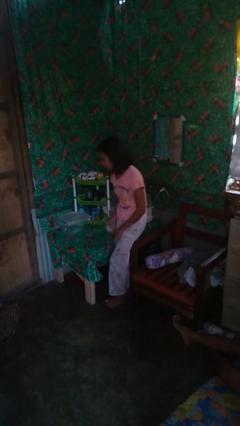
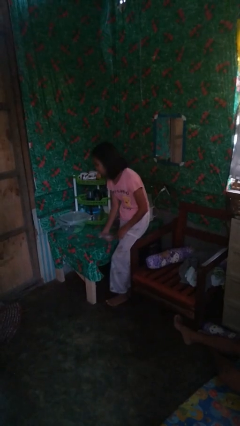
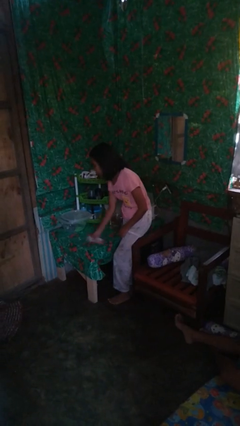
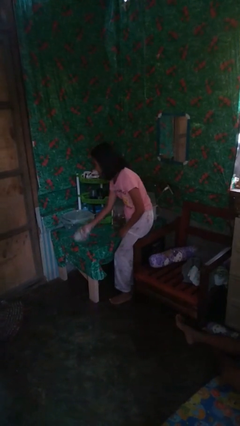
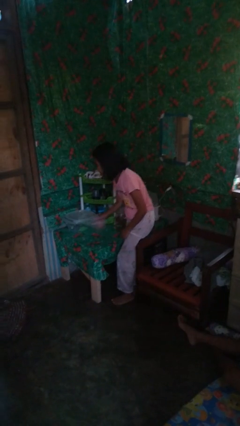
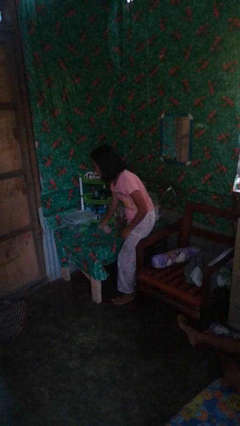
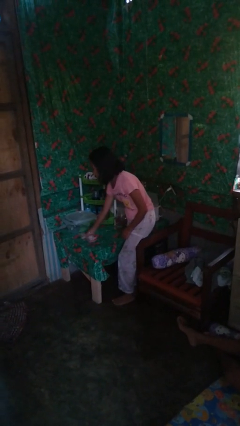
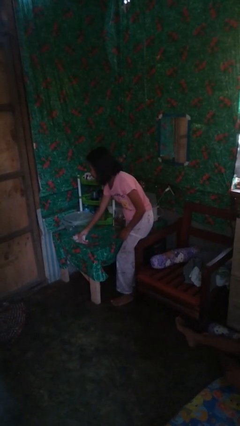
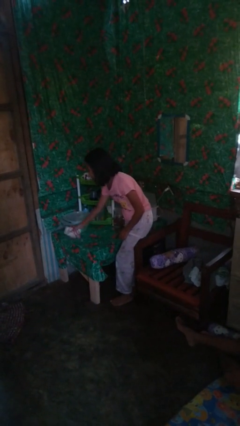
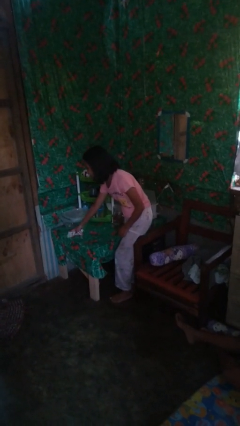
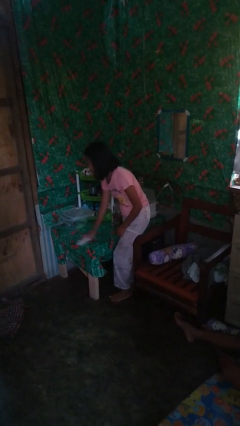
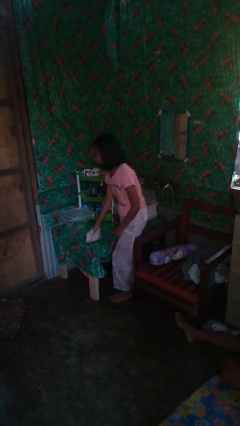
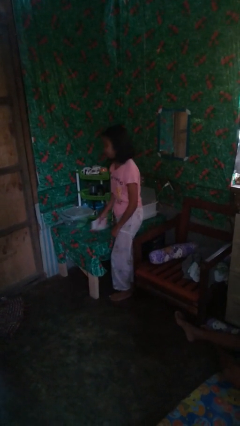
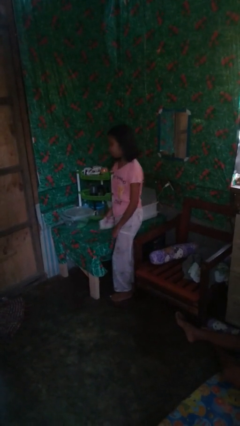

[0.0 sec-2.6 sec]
person cleans table with rag

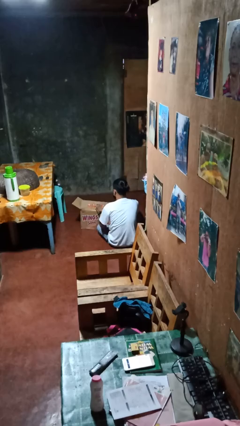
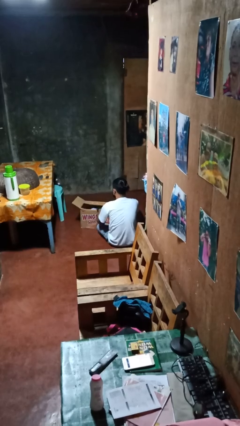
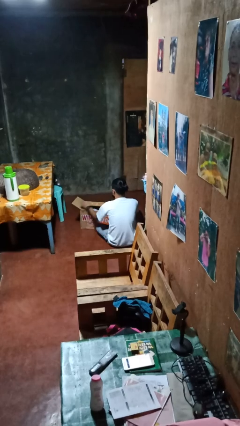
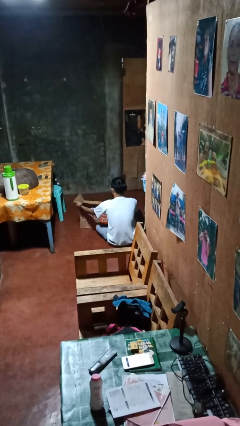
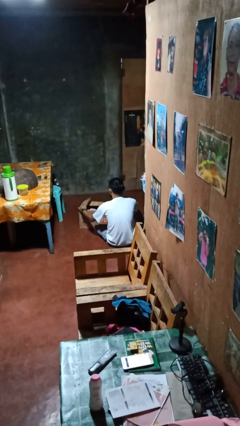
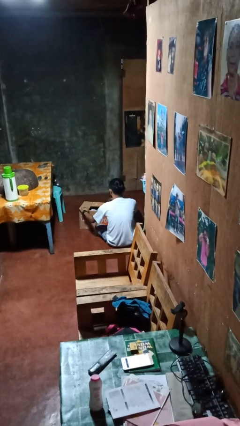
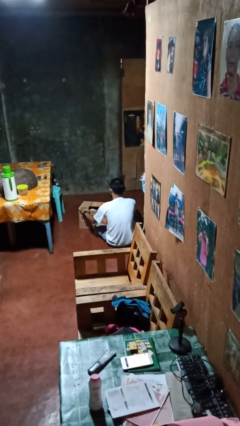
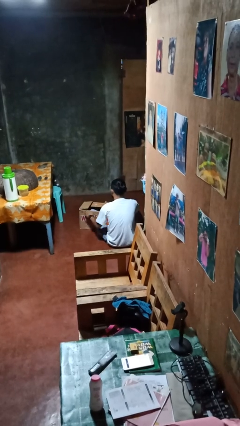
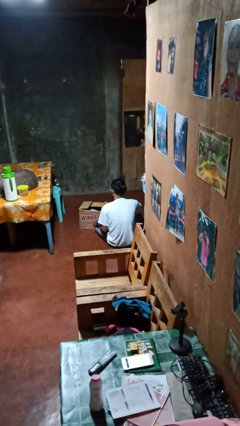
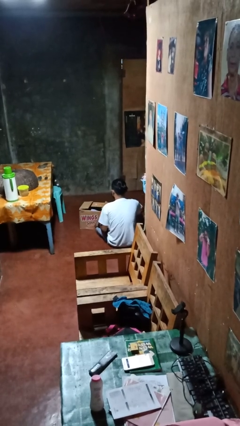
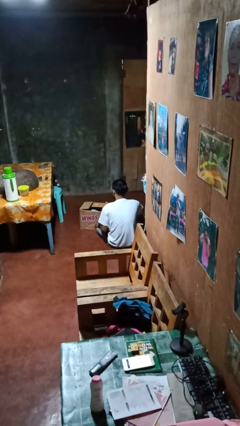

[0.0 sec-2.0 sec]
person closes box

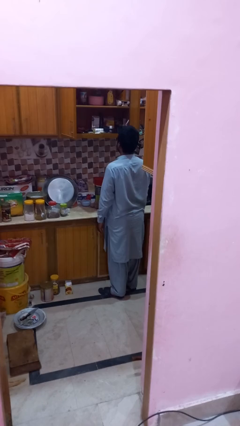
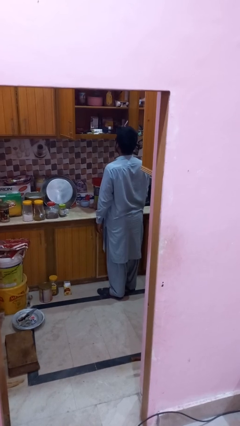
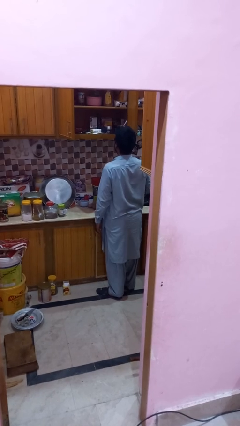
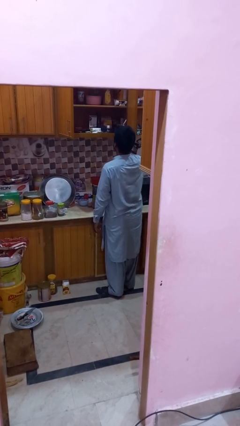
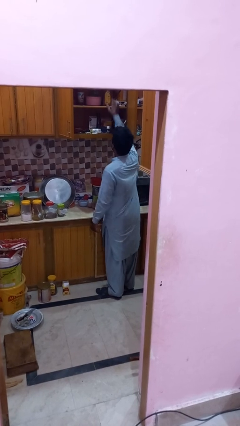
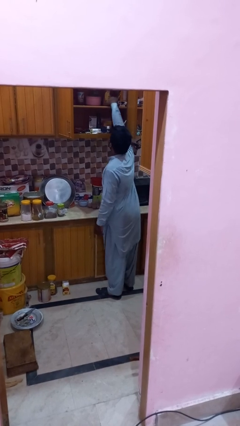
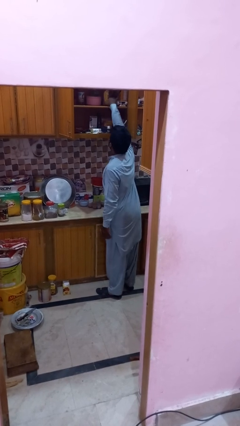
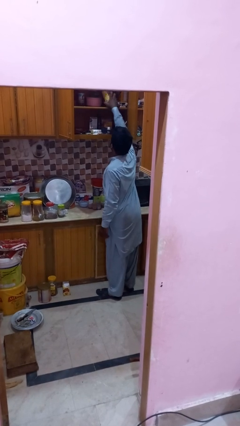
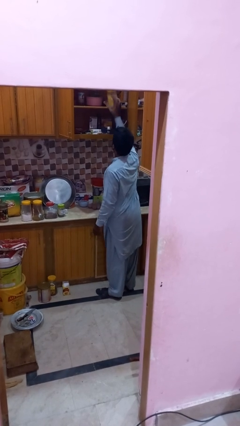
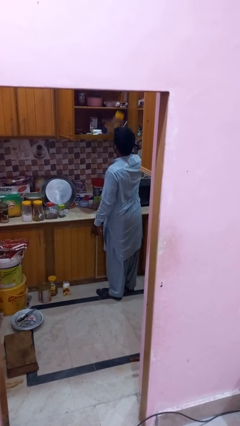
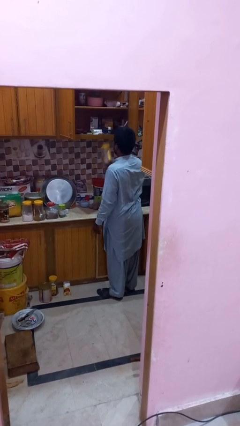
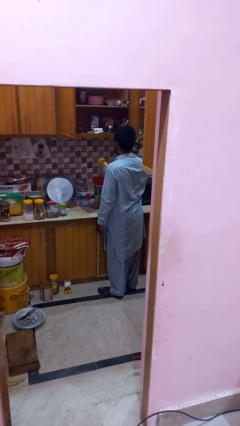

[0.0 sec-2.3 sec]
person takes object from cabinet

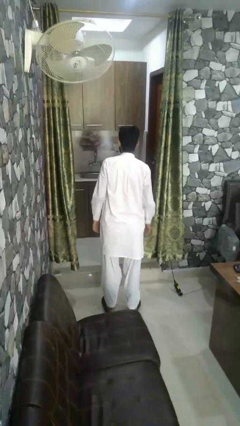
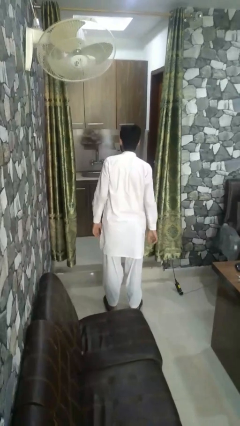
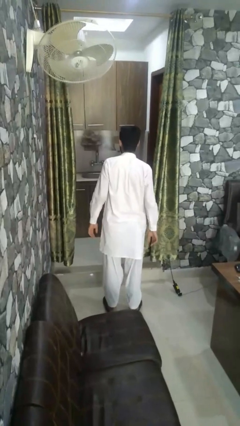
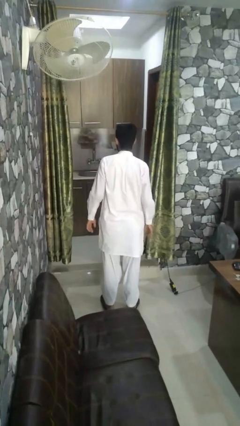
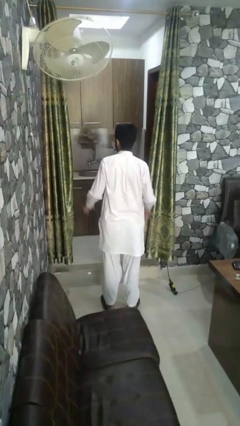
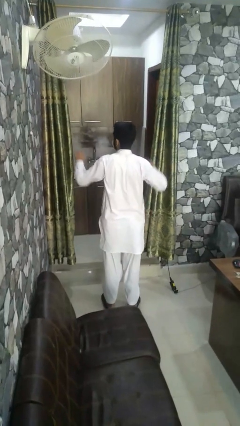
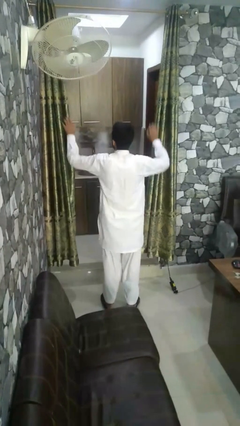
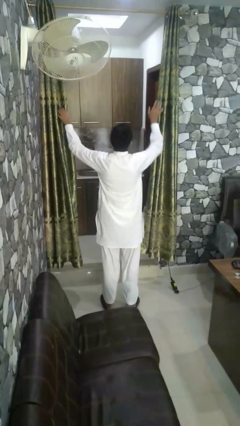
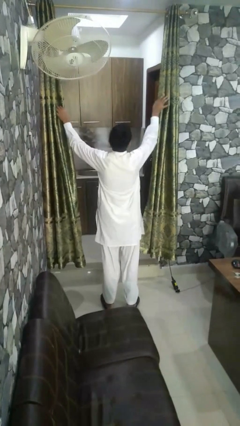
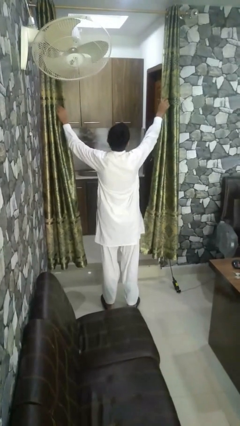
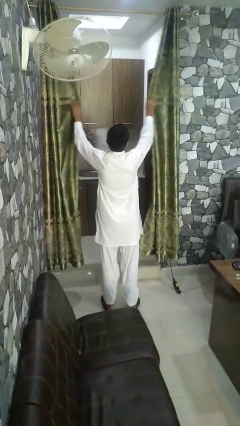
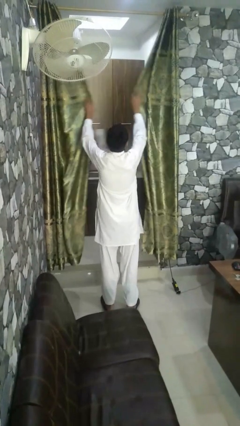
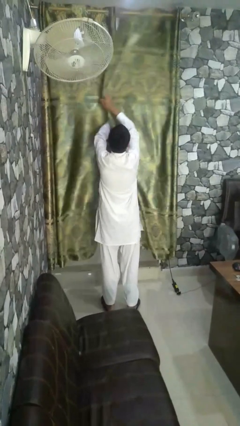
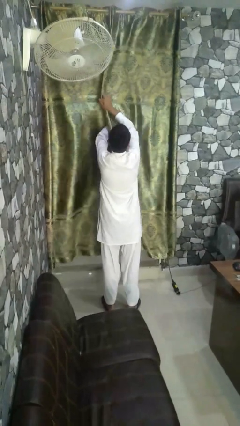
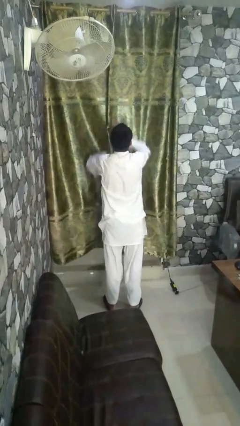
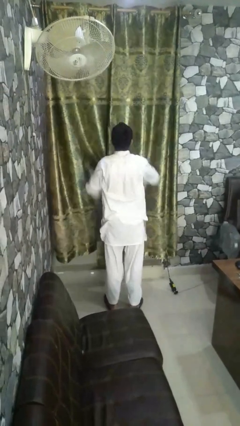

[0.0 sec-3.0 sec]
person closes curtains

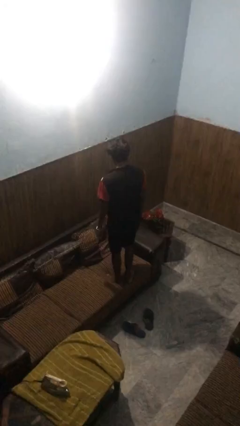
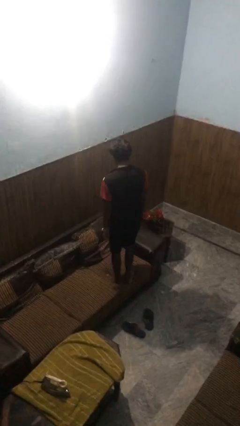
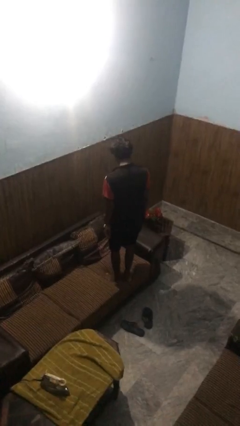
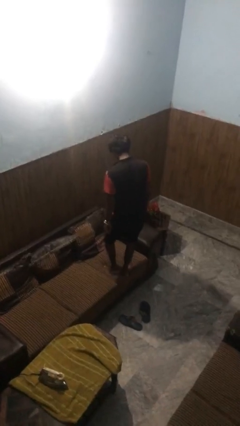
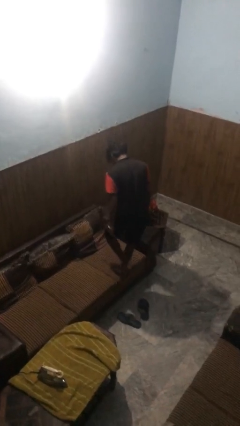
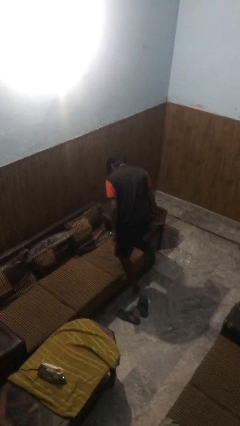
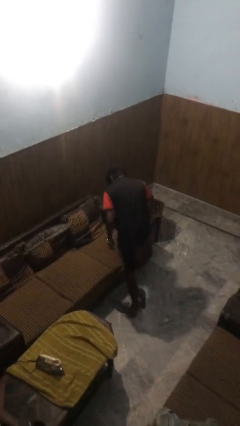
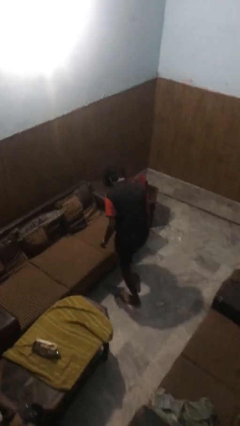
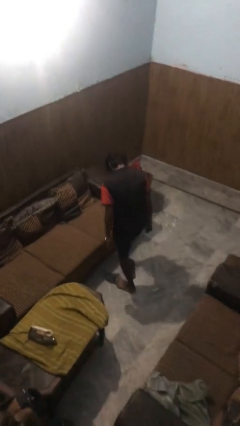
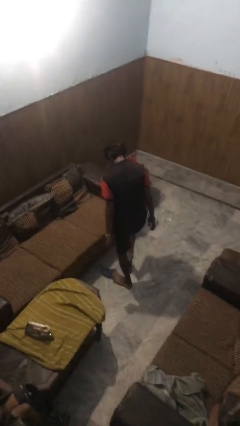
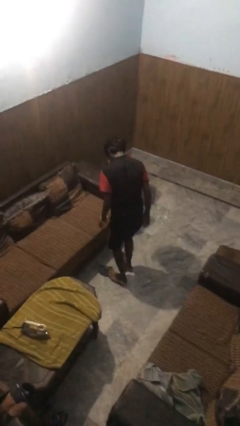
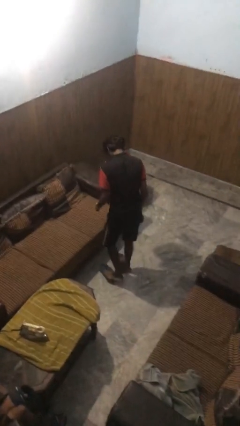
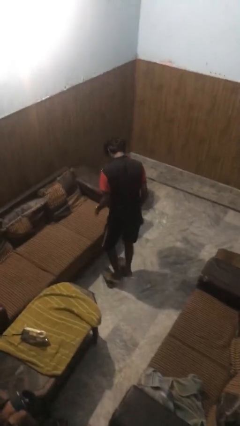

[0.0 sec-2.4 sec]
person climbs off couch

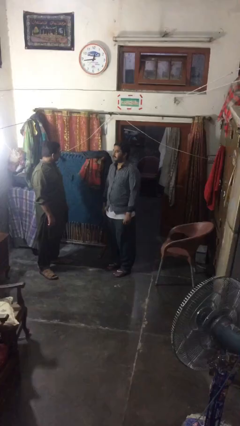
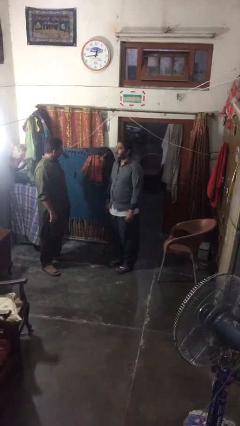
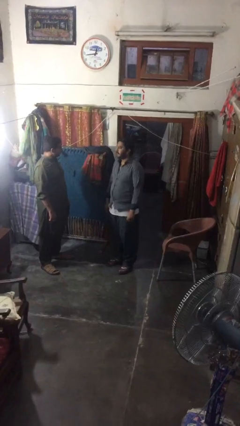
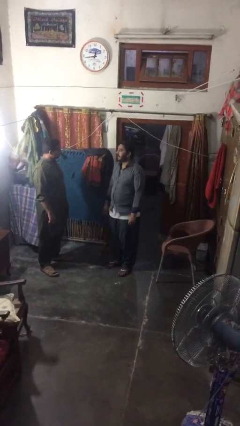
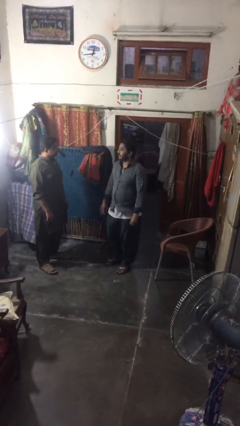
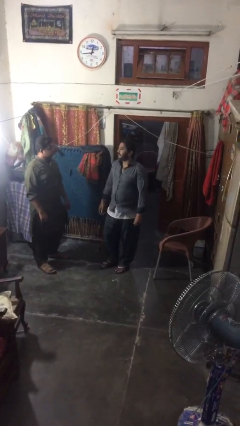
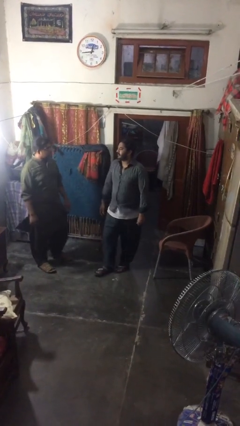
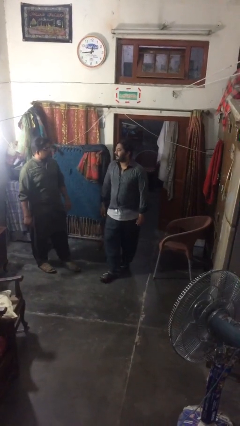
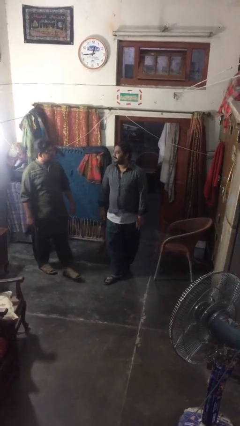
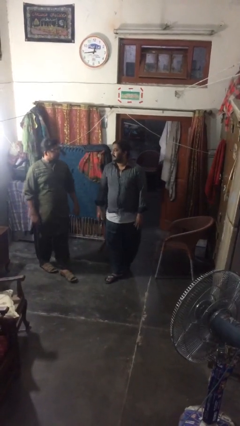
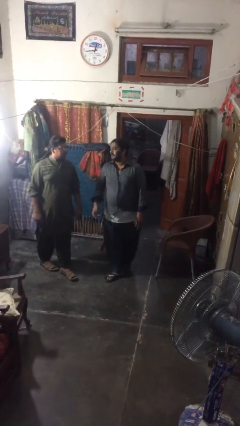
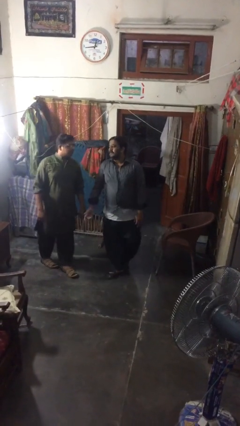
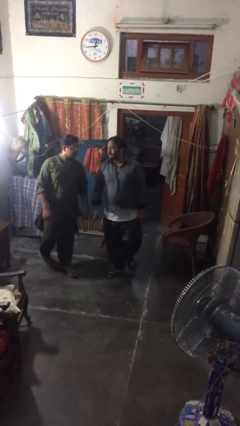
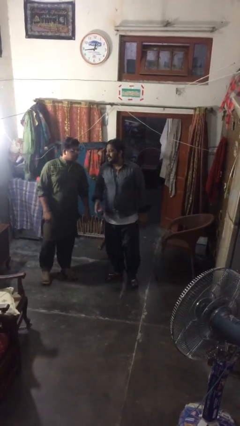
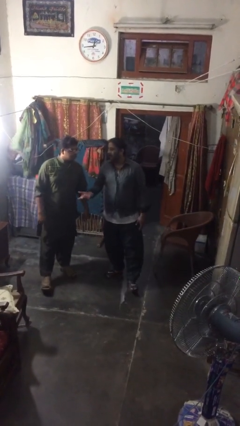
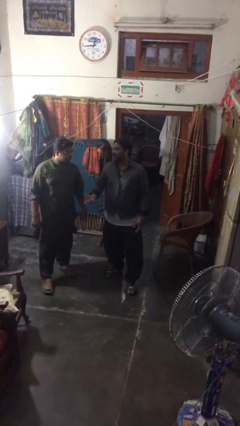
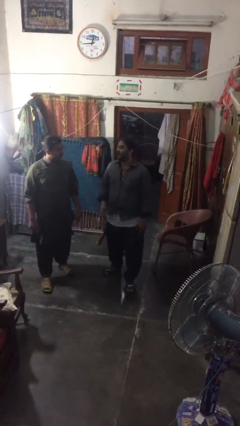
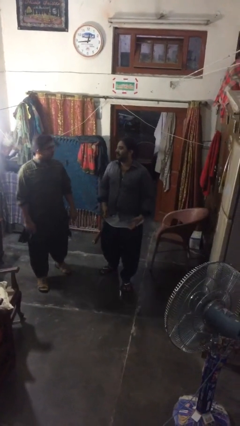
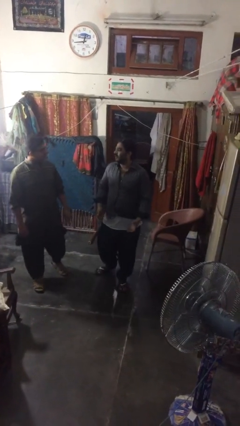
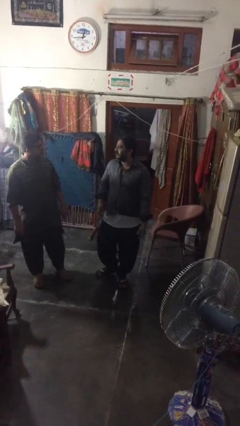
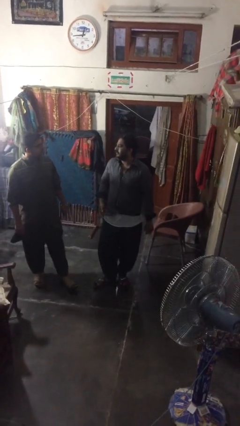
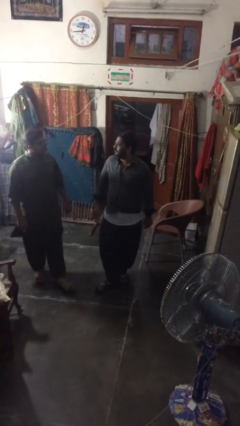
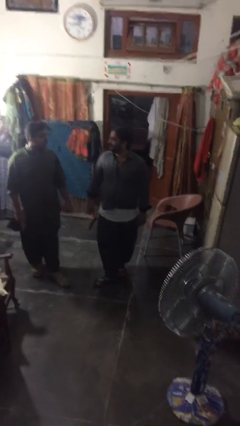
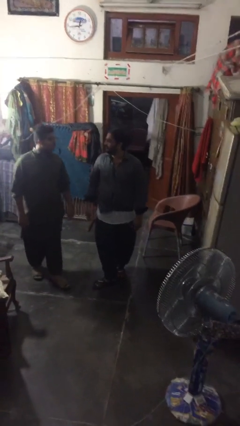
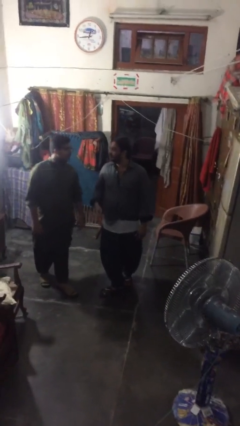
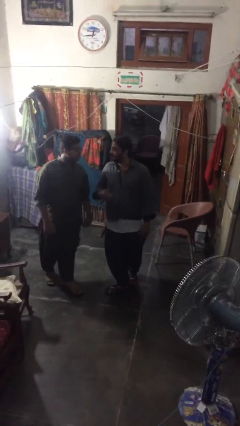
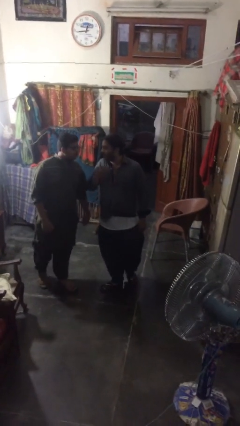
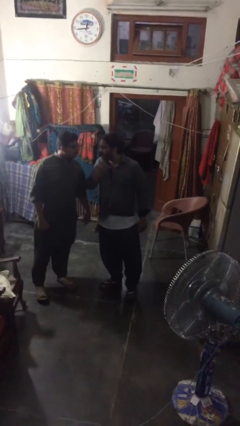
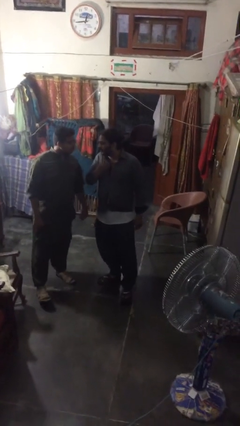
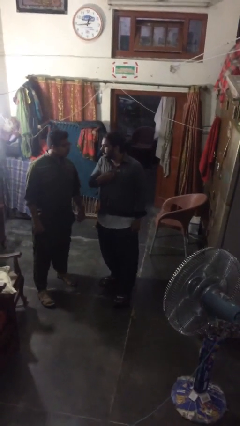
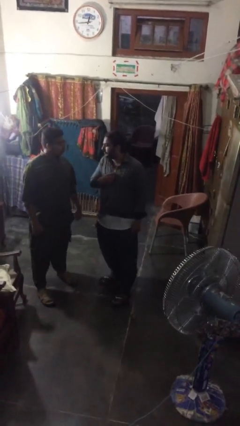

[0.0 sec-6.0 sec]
person talks to person
